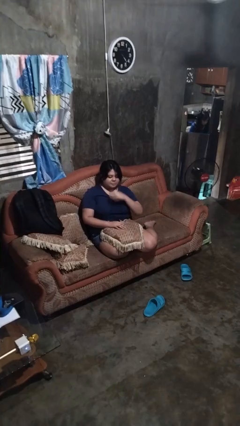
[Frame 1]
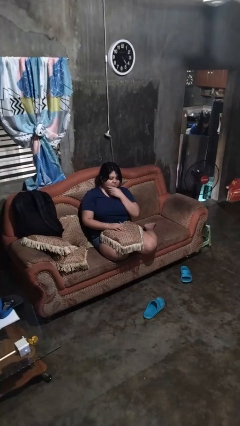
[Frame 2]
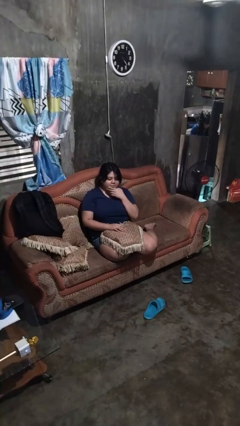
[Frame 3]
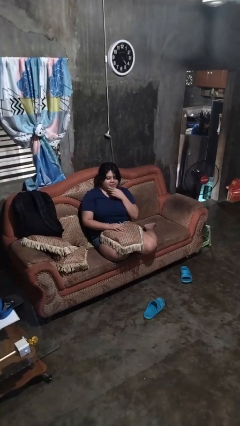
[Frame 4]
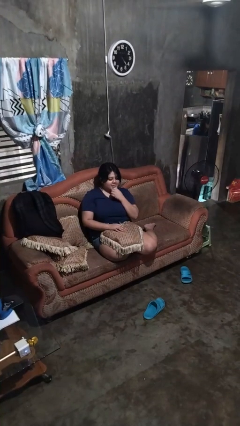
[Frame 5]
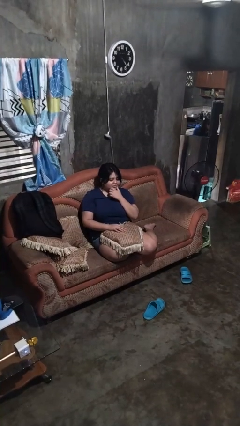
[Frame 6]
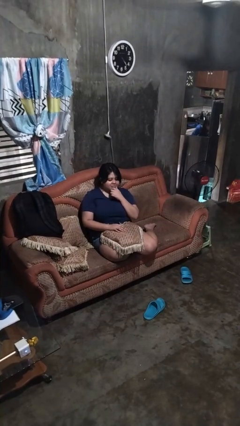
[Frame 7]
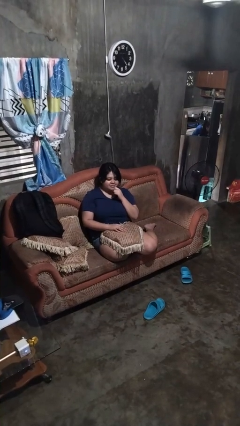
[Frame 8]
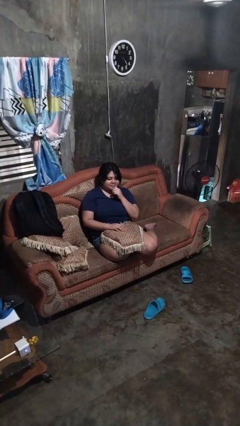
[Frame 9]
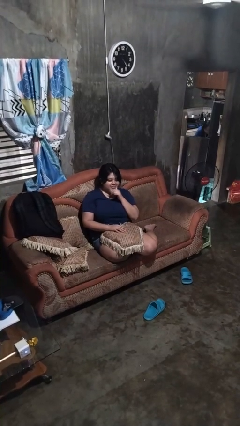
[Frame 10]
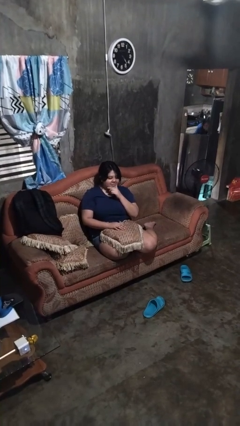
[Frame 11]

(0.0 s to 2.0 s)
person strokes chin

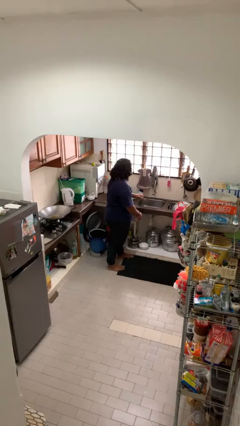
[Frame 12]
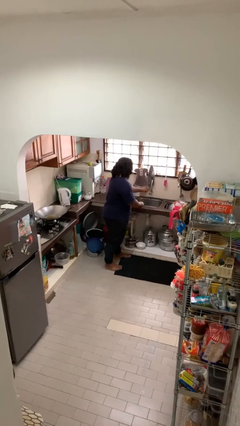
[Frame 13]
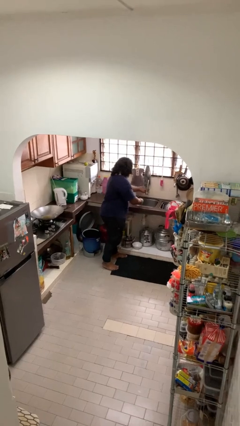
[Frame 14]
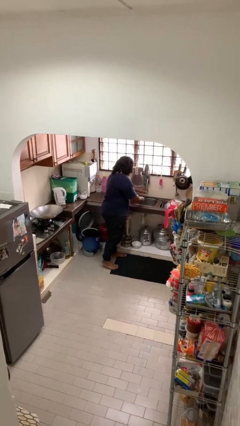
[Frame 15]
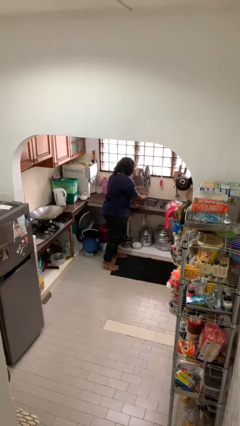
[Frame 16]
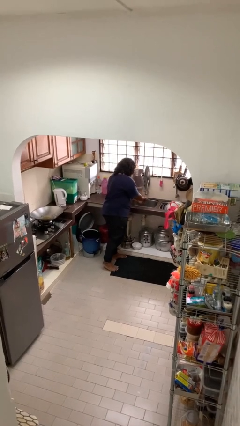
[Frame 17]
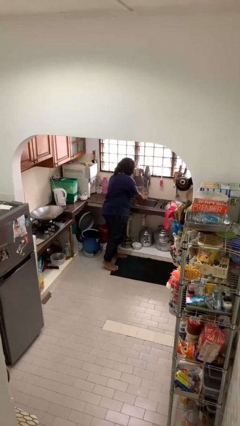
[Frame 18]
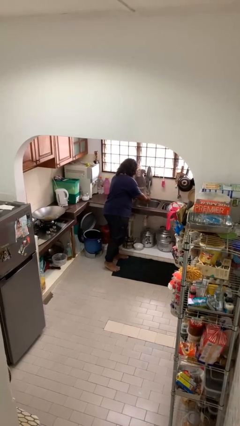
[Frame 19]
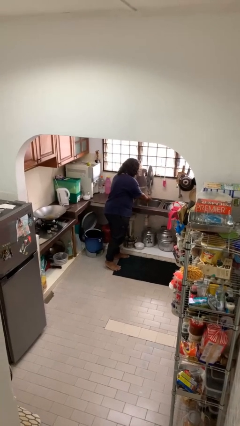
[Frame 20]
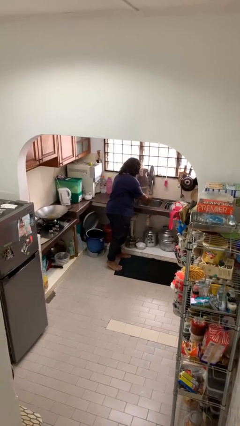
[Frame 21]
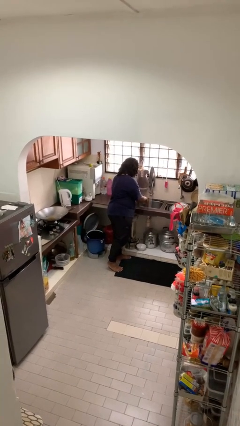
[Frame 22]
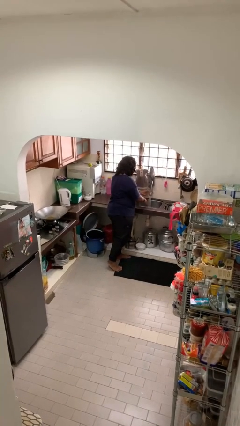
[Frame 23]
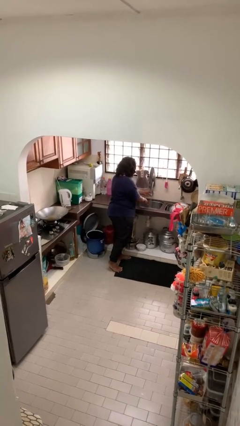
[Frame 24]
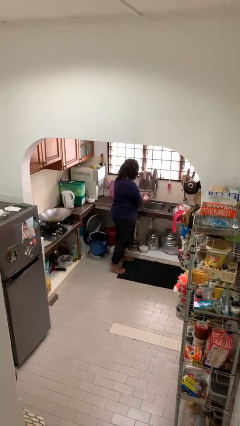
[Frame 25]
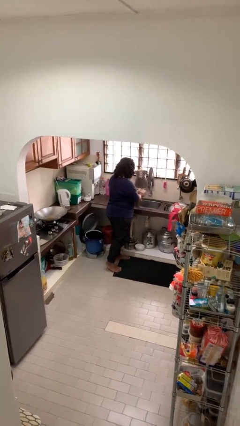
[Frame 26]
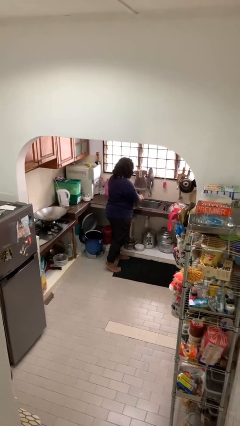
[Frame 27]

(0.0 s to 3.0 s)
person washes hands

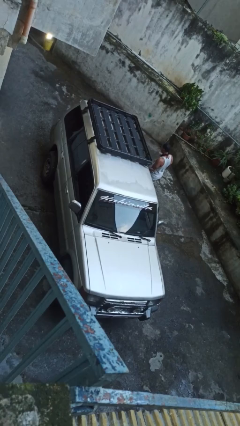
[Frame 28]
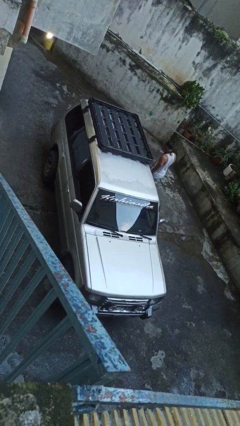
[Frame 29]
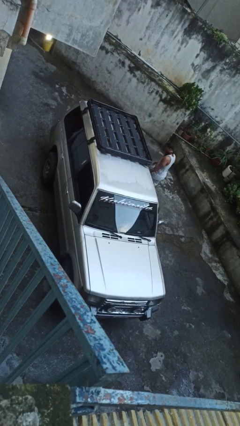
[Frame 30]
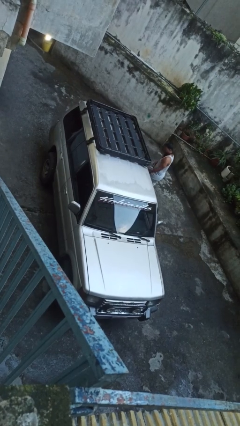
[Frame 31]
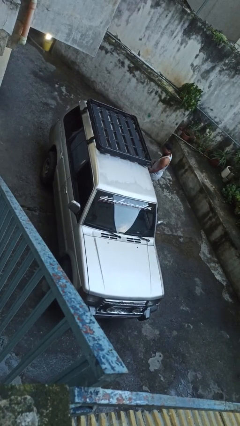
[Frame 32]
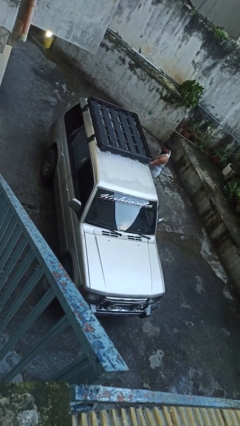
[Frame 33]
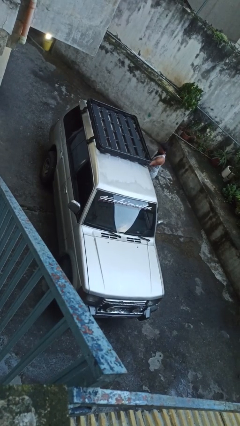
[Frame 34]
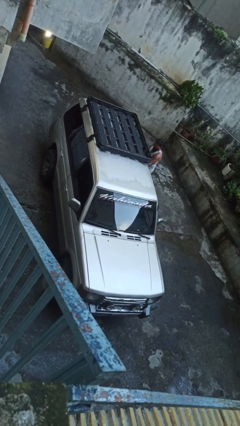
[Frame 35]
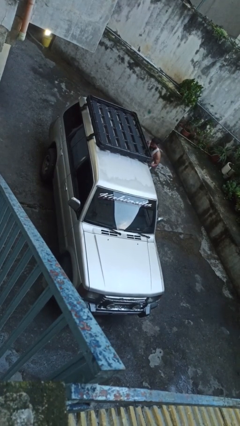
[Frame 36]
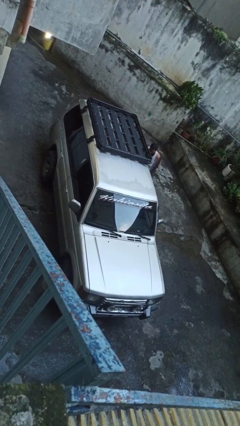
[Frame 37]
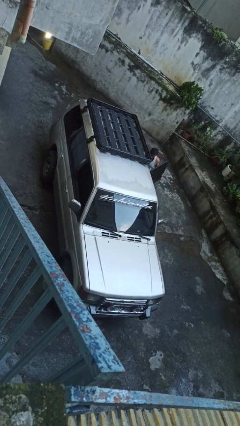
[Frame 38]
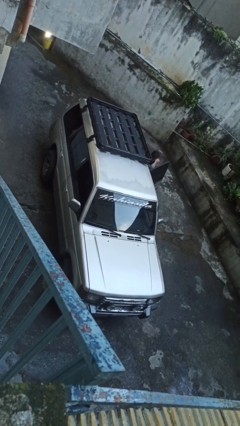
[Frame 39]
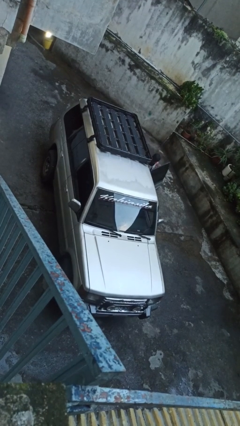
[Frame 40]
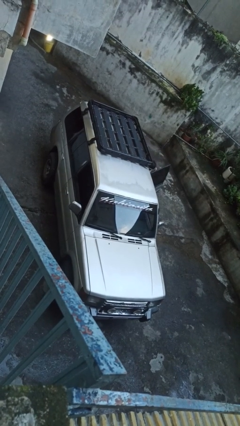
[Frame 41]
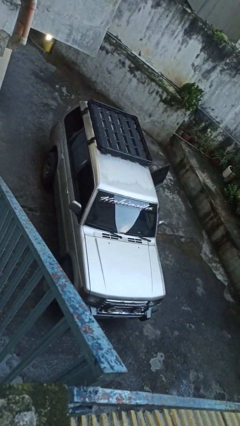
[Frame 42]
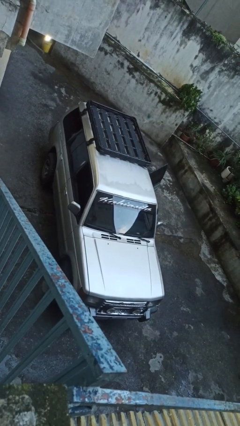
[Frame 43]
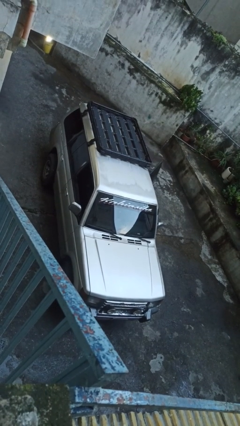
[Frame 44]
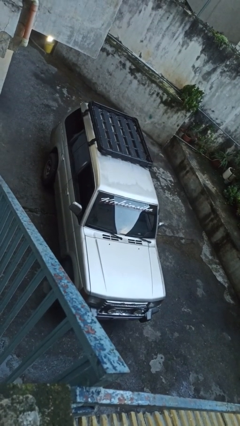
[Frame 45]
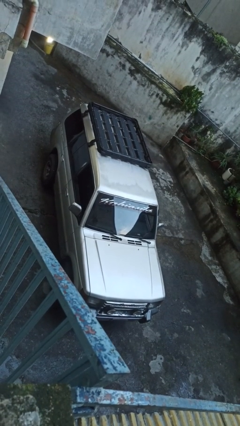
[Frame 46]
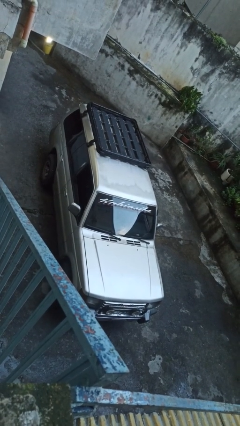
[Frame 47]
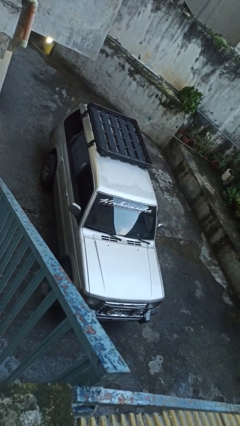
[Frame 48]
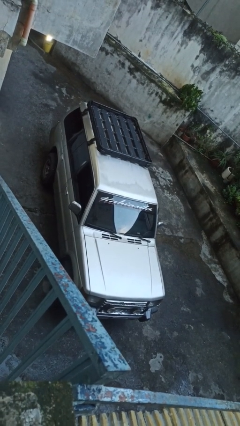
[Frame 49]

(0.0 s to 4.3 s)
car picks up person

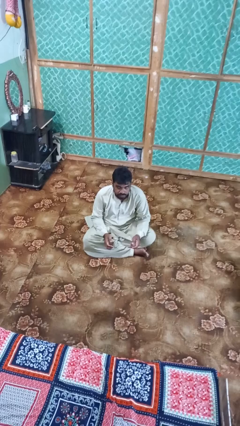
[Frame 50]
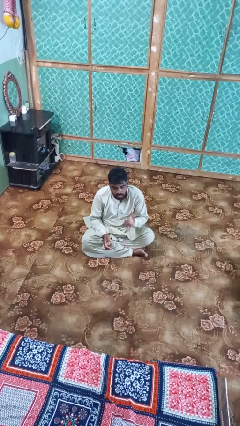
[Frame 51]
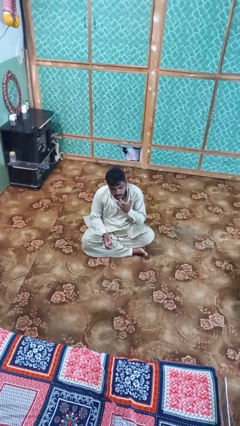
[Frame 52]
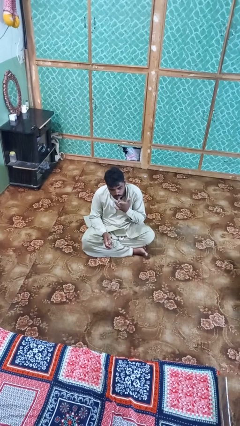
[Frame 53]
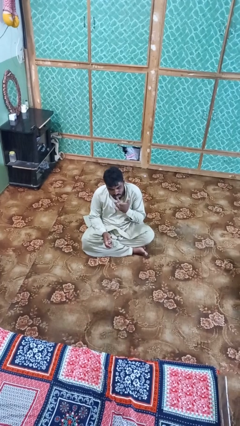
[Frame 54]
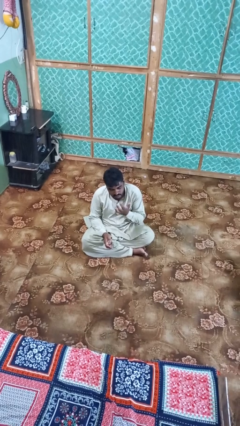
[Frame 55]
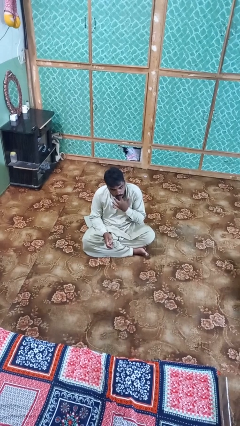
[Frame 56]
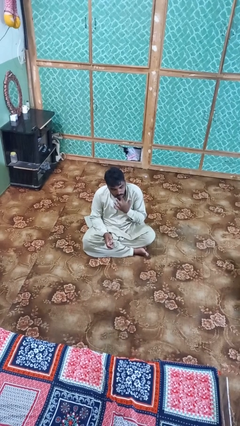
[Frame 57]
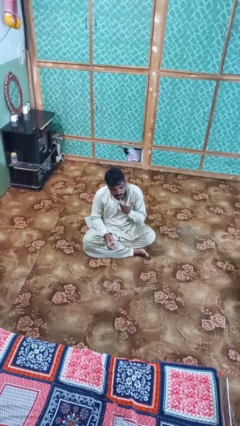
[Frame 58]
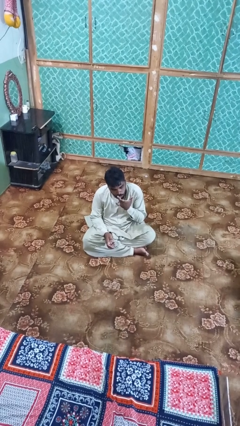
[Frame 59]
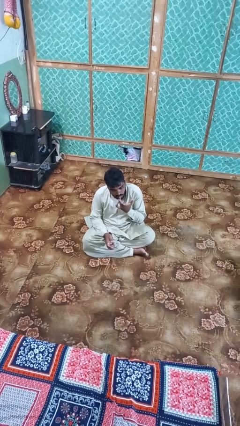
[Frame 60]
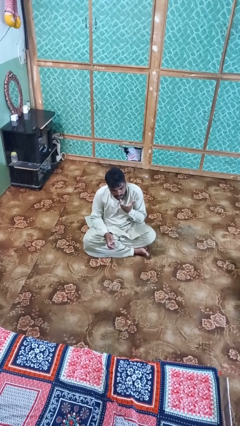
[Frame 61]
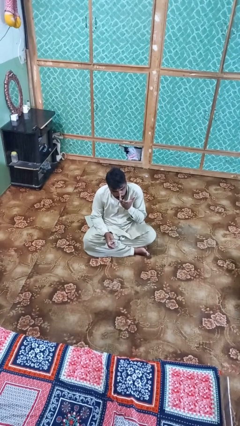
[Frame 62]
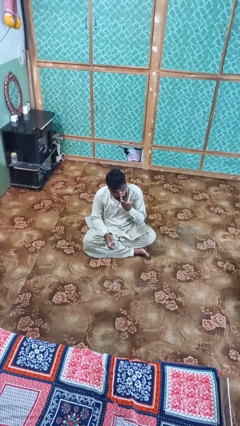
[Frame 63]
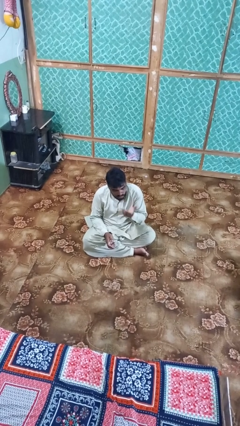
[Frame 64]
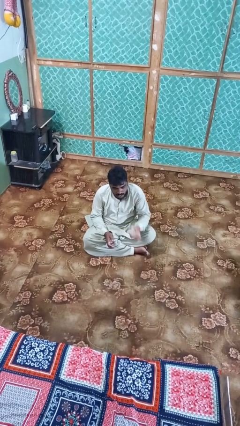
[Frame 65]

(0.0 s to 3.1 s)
person licks fingers

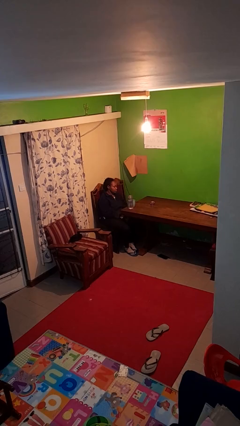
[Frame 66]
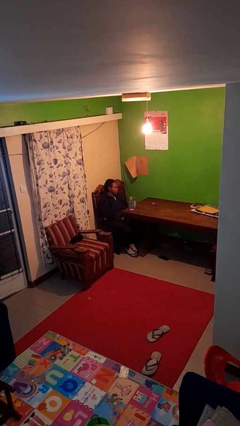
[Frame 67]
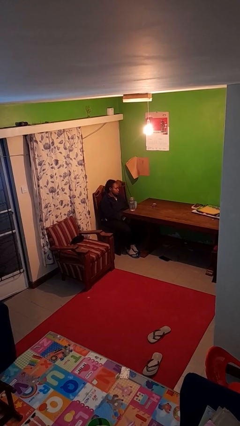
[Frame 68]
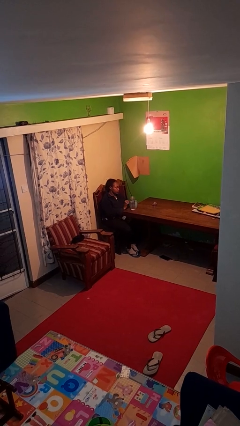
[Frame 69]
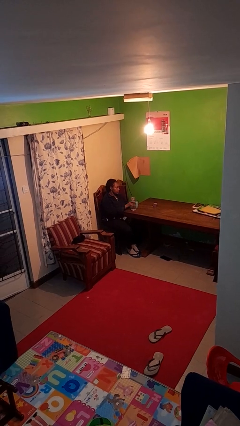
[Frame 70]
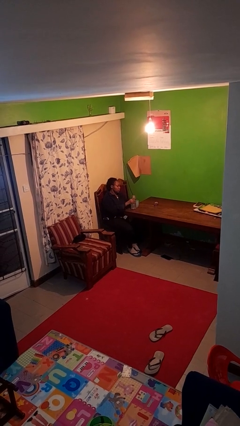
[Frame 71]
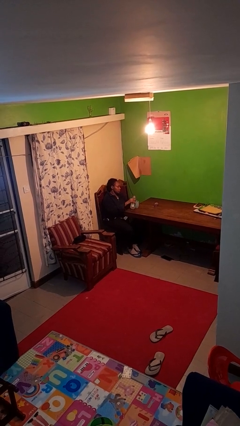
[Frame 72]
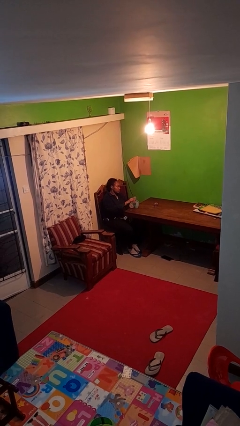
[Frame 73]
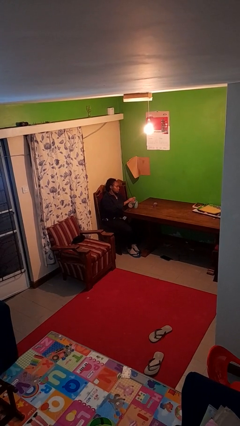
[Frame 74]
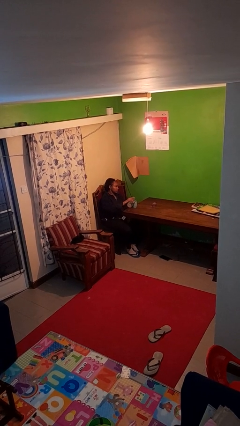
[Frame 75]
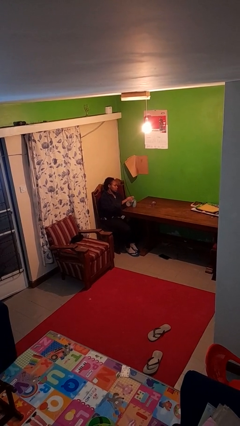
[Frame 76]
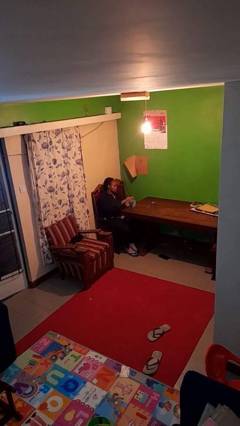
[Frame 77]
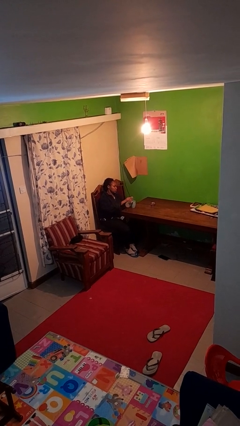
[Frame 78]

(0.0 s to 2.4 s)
person pours liquid into cup

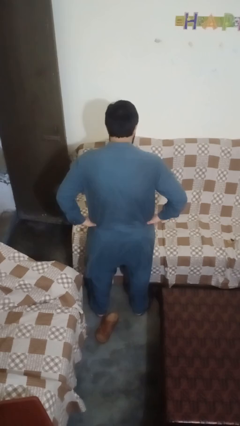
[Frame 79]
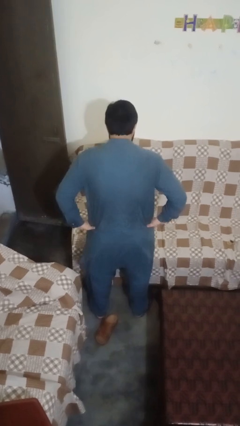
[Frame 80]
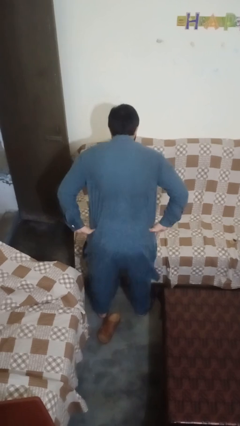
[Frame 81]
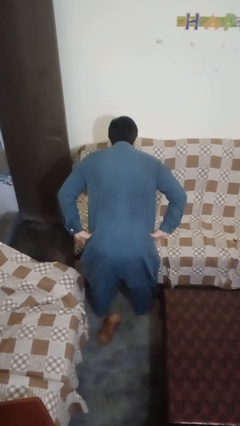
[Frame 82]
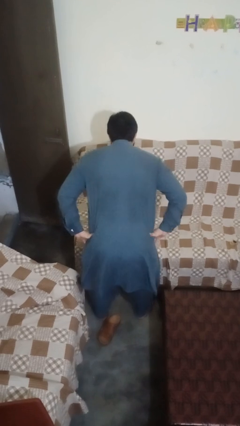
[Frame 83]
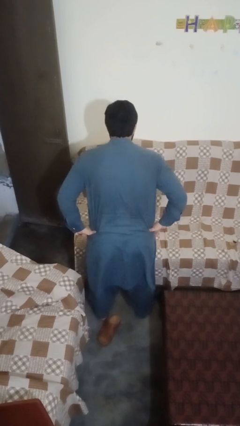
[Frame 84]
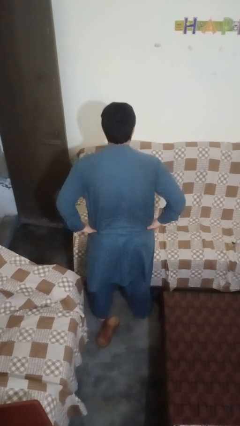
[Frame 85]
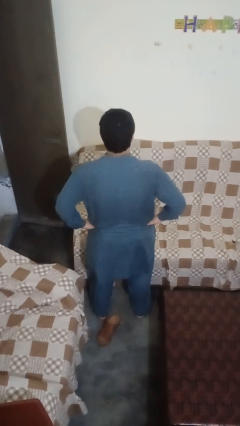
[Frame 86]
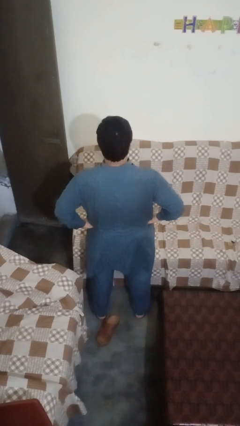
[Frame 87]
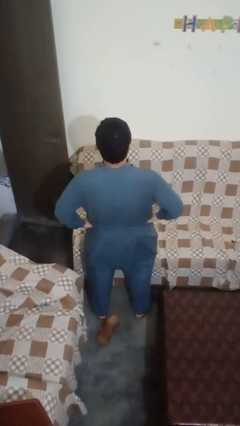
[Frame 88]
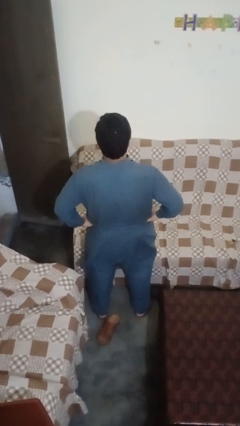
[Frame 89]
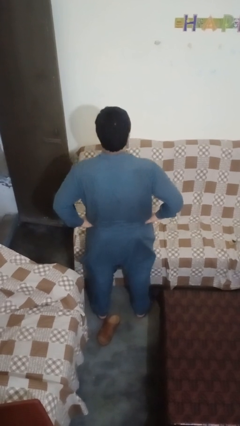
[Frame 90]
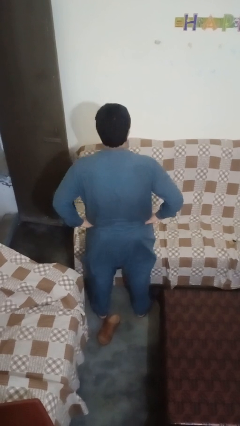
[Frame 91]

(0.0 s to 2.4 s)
person wiggles hips

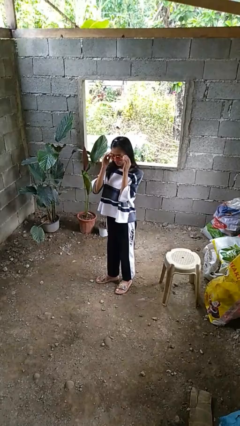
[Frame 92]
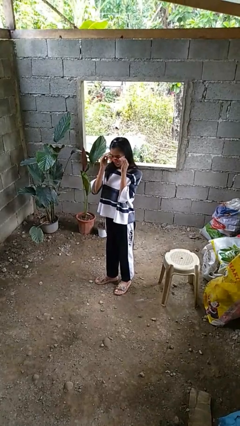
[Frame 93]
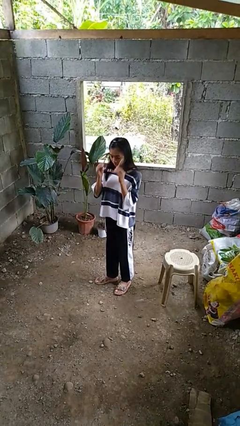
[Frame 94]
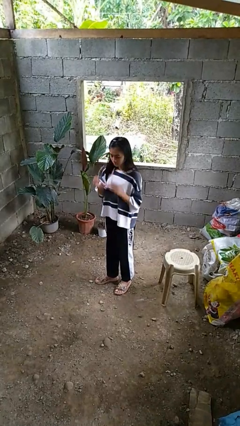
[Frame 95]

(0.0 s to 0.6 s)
person takes off sunglasses
